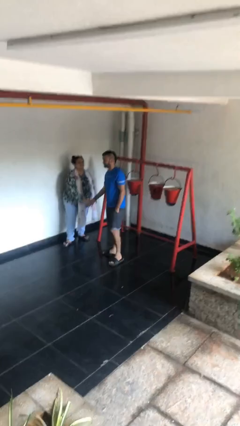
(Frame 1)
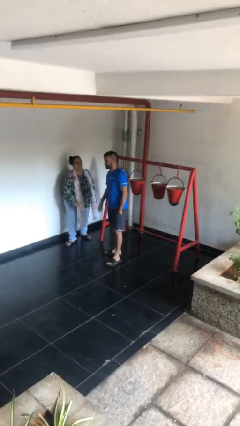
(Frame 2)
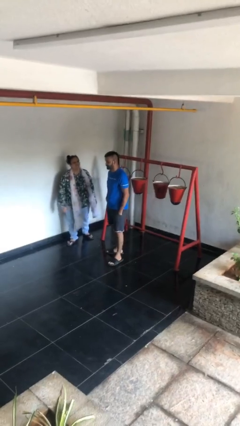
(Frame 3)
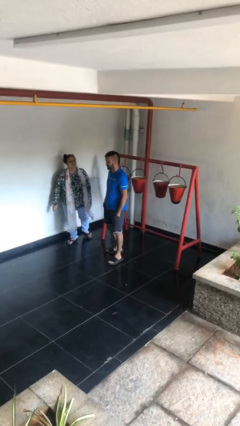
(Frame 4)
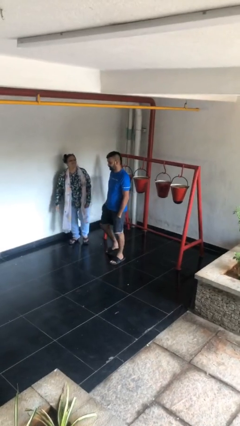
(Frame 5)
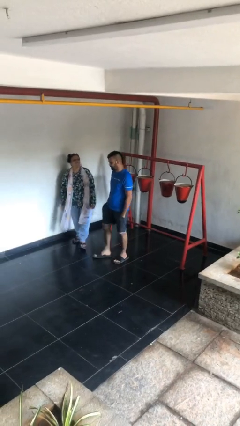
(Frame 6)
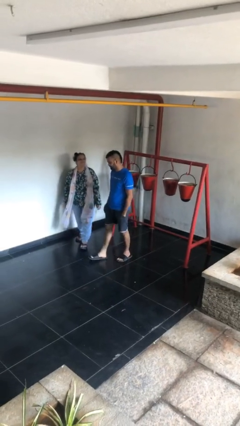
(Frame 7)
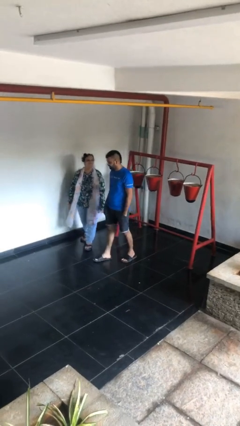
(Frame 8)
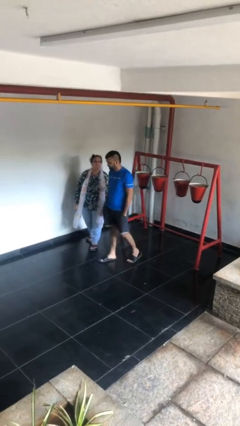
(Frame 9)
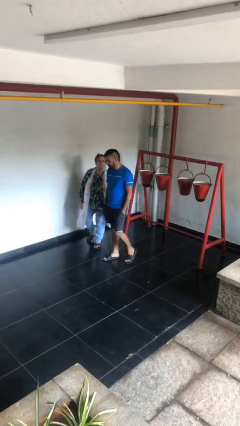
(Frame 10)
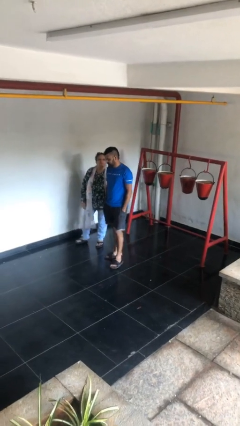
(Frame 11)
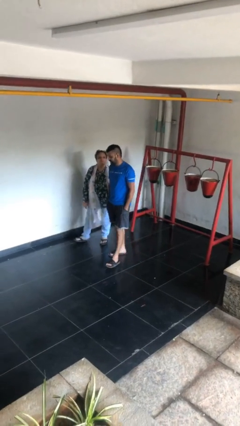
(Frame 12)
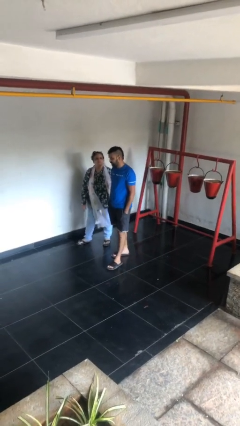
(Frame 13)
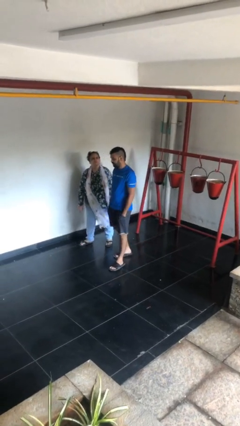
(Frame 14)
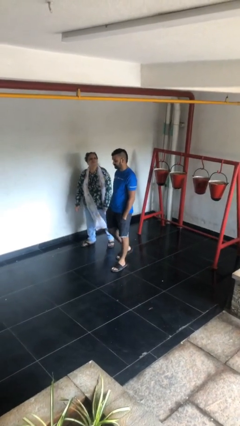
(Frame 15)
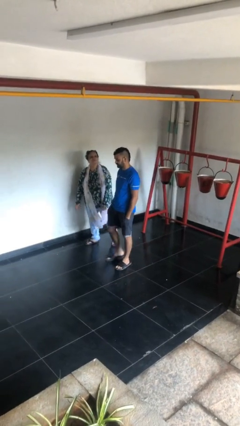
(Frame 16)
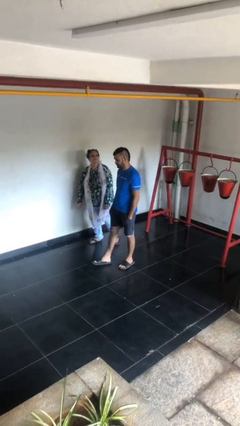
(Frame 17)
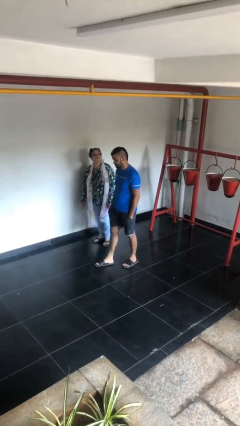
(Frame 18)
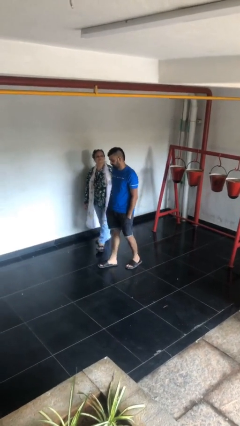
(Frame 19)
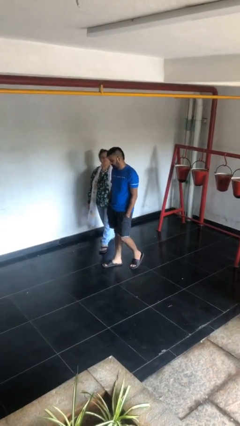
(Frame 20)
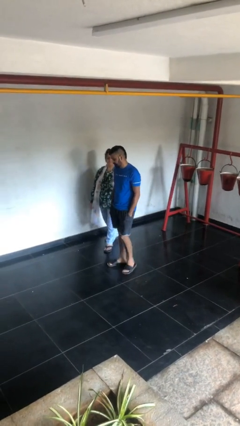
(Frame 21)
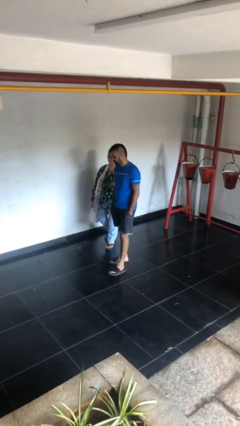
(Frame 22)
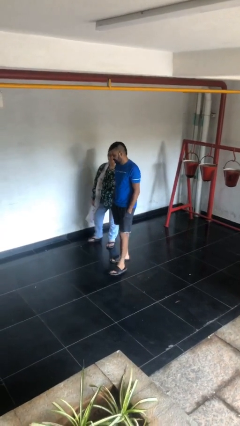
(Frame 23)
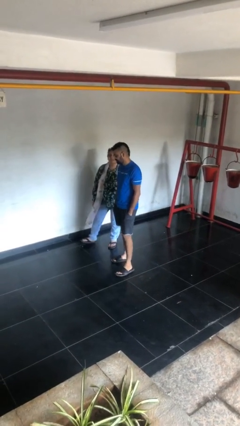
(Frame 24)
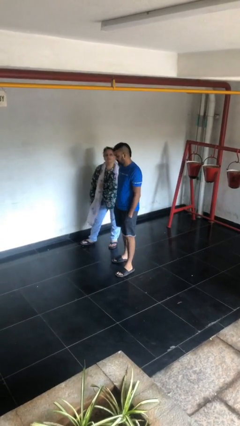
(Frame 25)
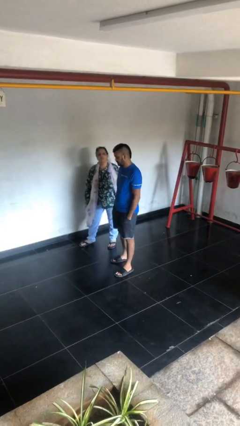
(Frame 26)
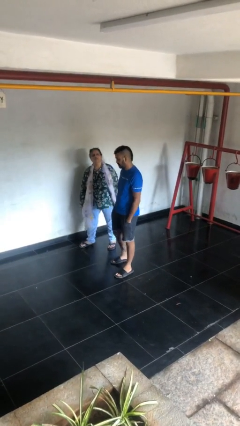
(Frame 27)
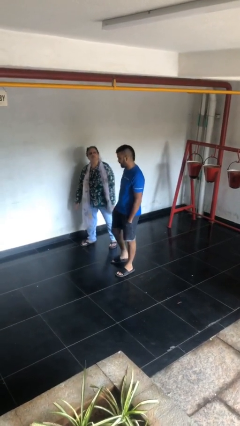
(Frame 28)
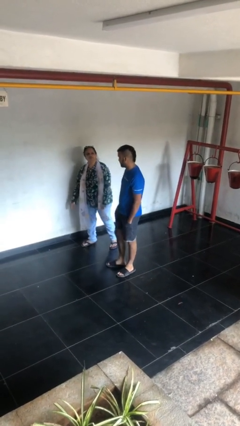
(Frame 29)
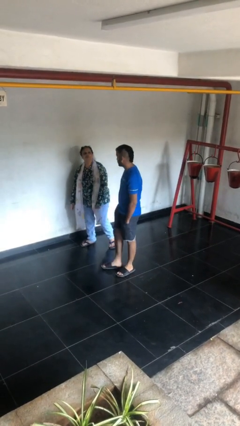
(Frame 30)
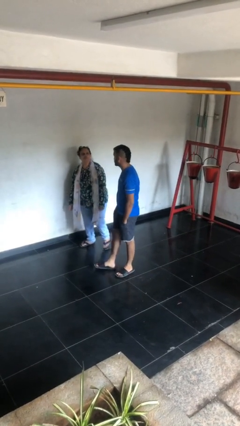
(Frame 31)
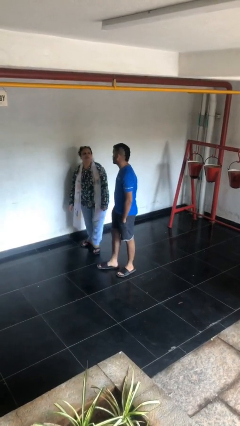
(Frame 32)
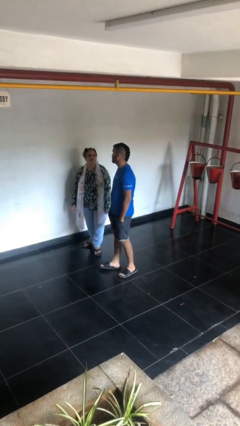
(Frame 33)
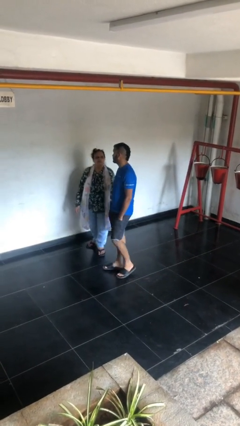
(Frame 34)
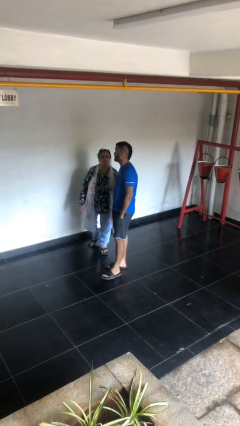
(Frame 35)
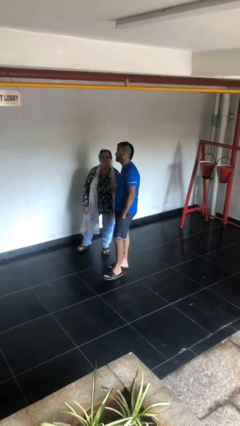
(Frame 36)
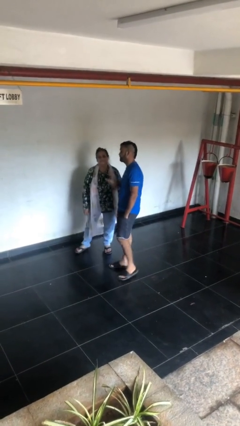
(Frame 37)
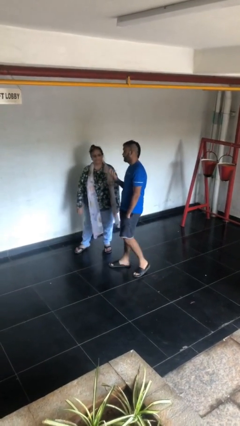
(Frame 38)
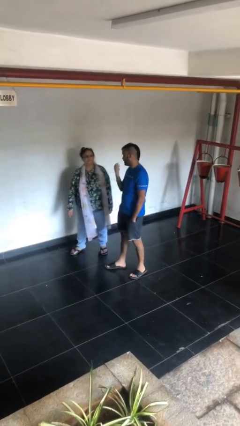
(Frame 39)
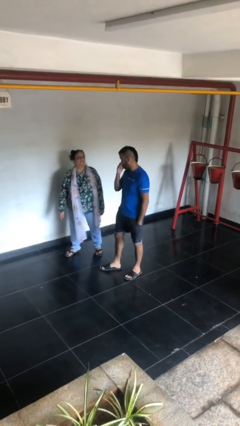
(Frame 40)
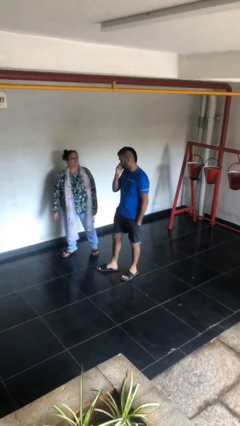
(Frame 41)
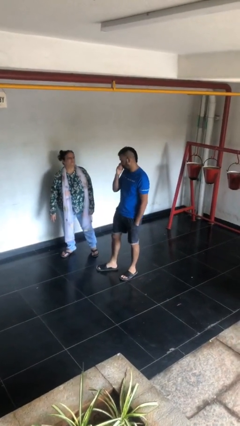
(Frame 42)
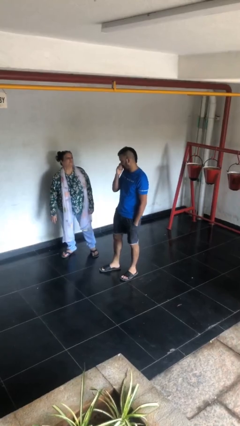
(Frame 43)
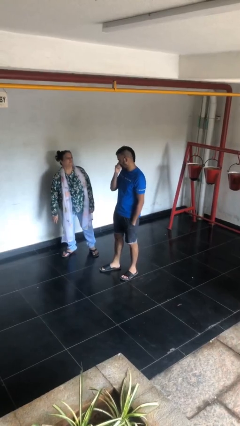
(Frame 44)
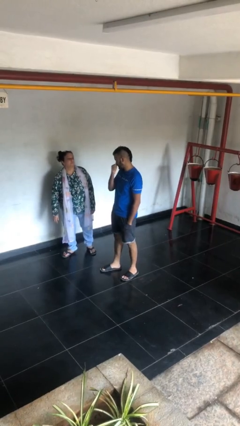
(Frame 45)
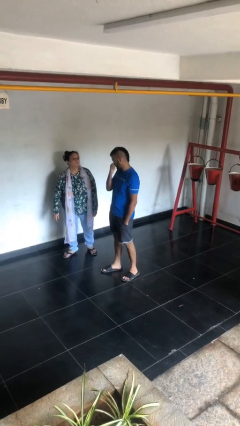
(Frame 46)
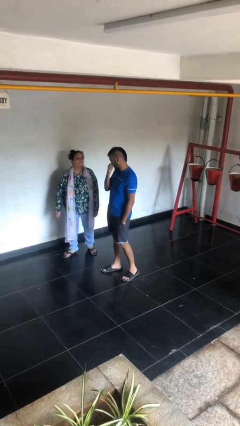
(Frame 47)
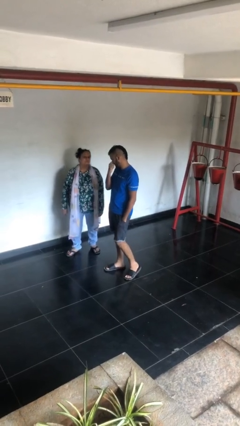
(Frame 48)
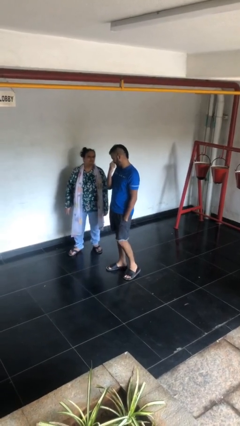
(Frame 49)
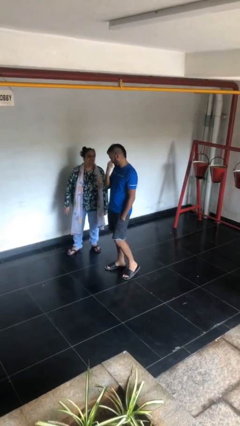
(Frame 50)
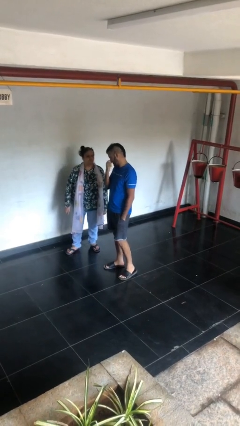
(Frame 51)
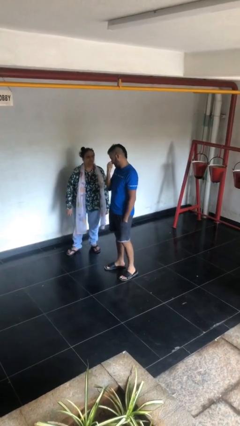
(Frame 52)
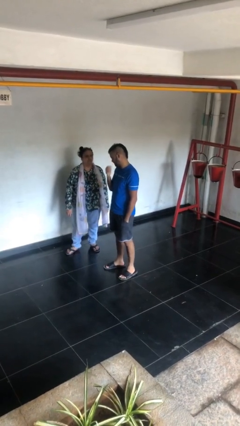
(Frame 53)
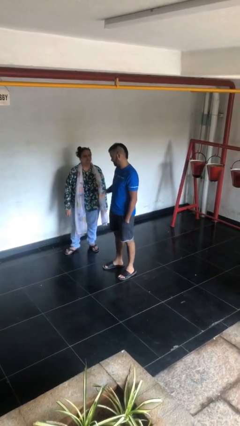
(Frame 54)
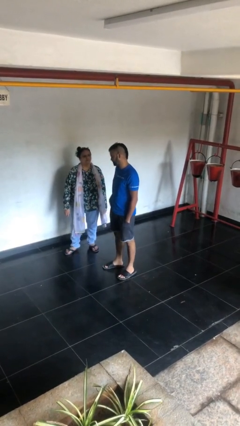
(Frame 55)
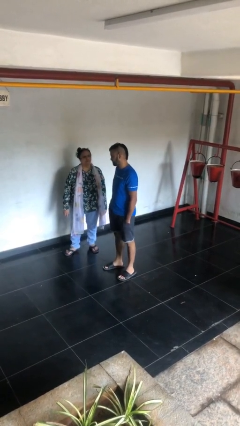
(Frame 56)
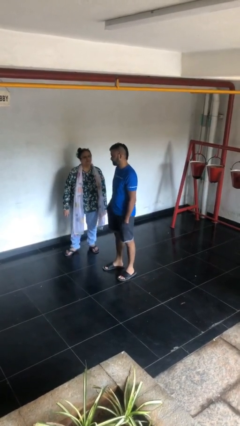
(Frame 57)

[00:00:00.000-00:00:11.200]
person talks to person

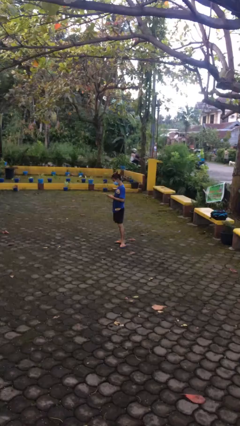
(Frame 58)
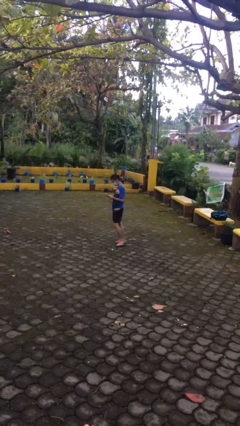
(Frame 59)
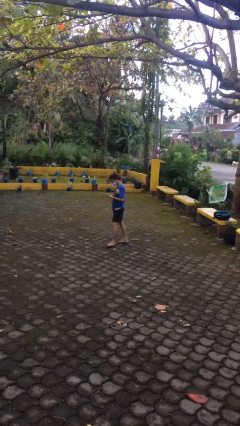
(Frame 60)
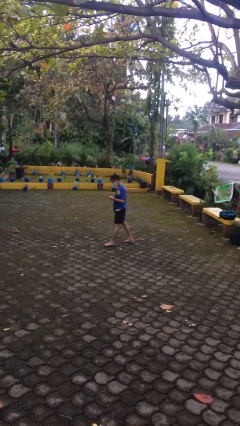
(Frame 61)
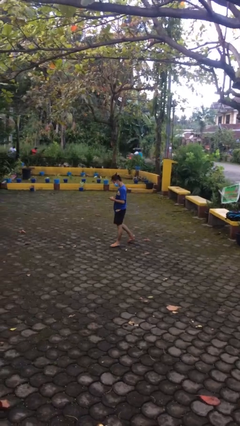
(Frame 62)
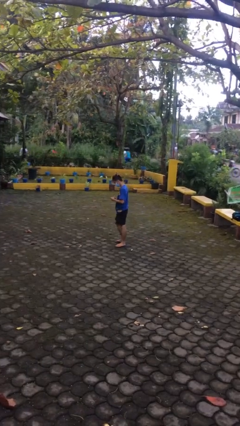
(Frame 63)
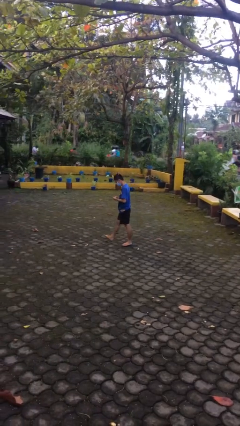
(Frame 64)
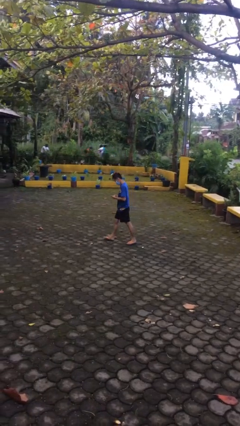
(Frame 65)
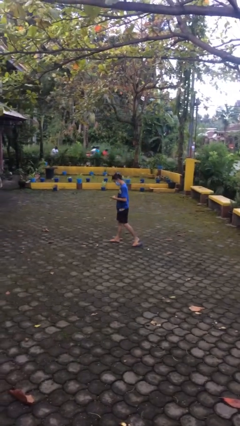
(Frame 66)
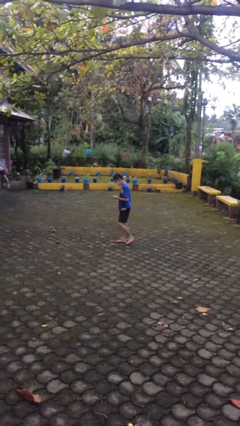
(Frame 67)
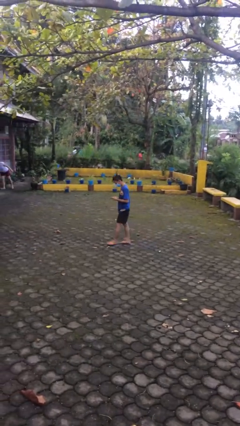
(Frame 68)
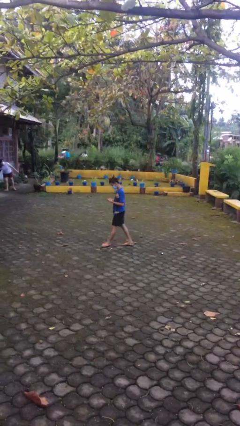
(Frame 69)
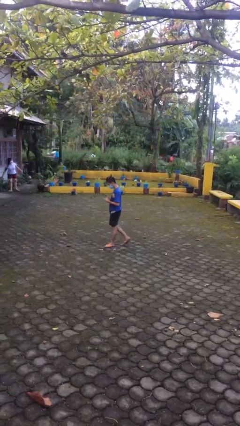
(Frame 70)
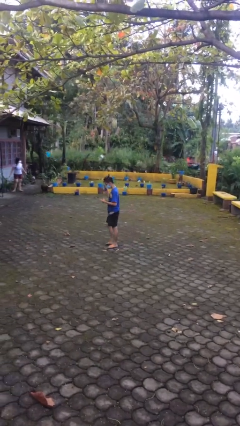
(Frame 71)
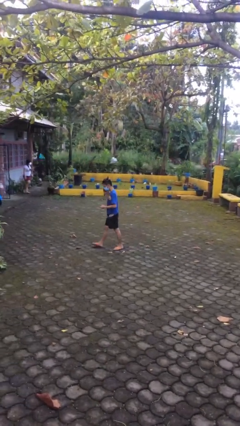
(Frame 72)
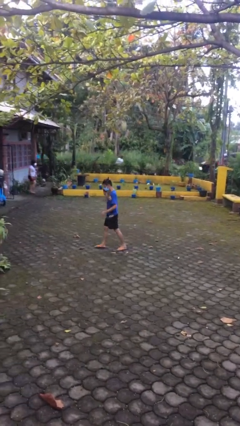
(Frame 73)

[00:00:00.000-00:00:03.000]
person texts on phone

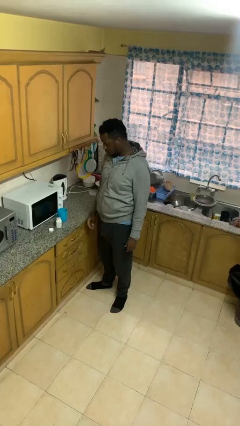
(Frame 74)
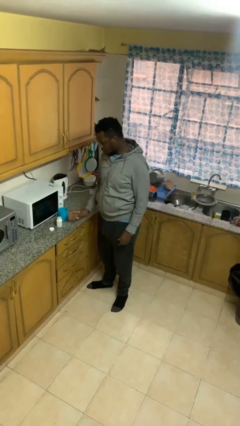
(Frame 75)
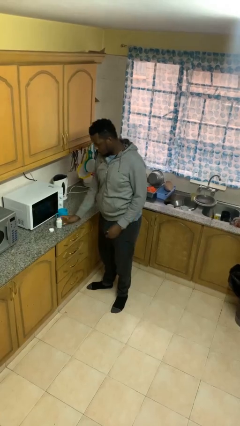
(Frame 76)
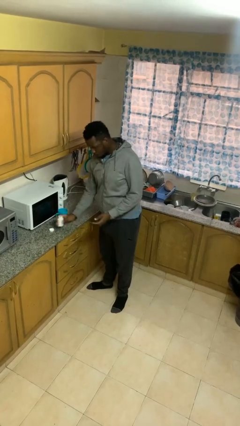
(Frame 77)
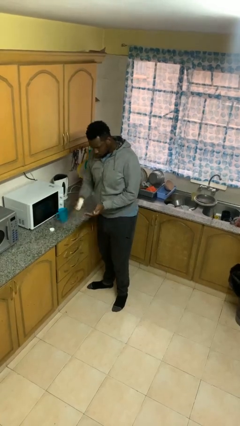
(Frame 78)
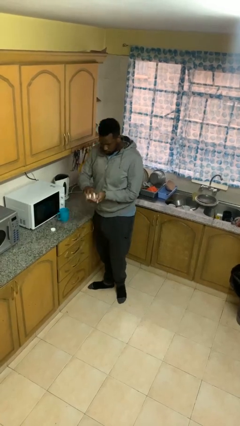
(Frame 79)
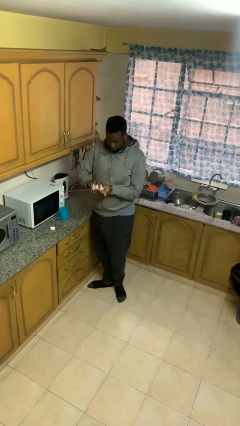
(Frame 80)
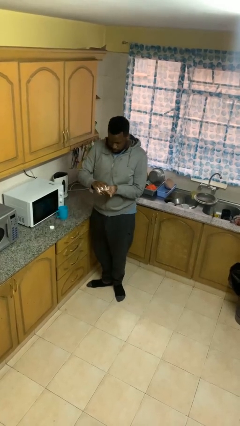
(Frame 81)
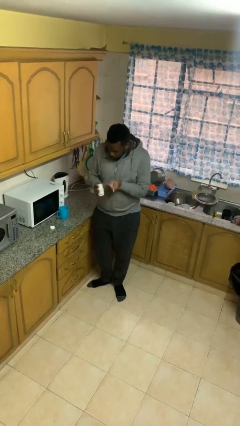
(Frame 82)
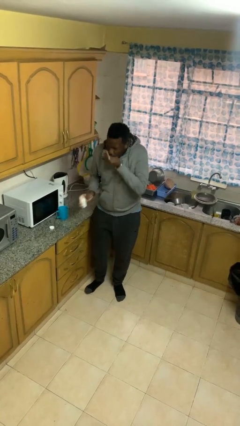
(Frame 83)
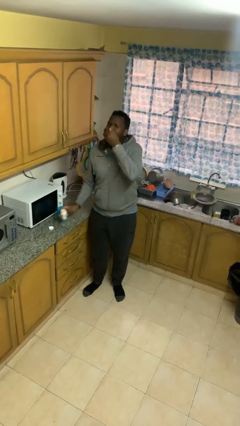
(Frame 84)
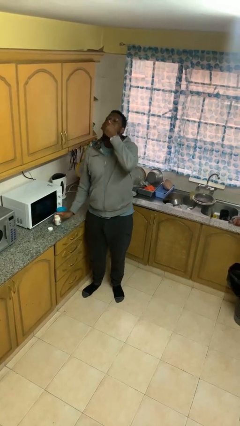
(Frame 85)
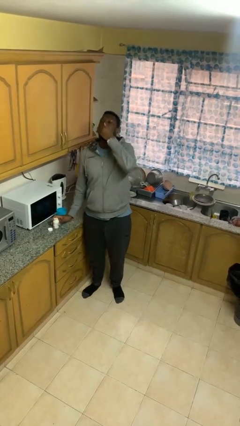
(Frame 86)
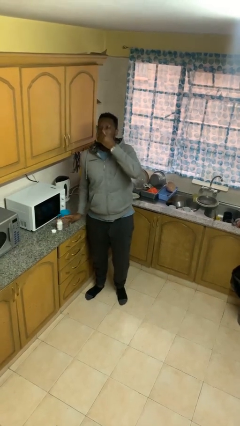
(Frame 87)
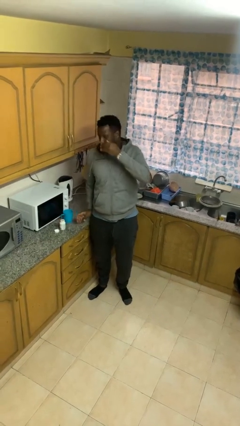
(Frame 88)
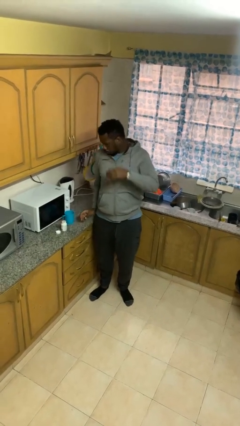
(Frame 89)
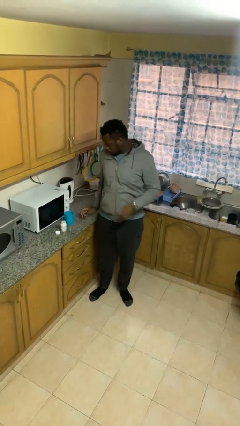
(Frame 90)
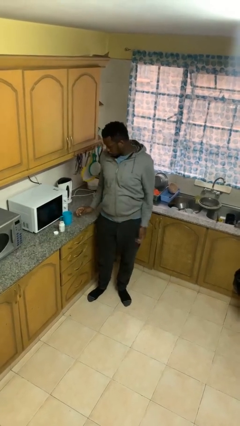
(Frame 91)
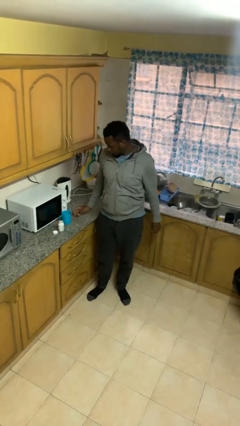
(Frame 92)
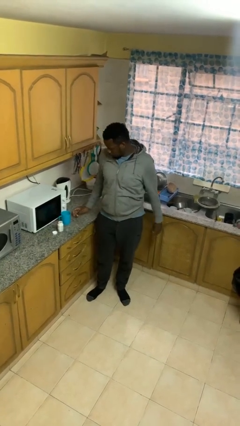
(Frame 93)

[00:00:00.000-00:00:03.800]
person takes medicine pills
